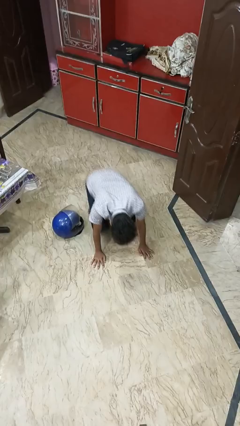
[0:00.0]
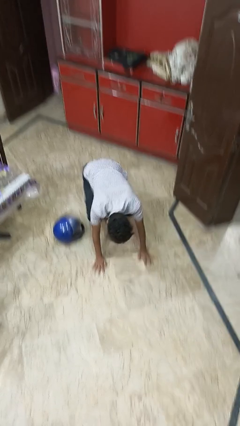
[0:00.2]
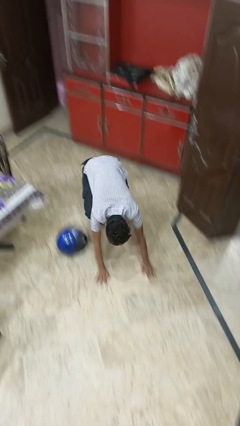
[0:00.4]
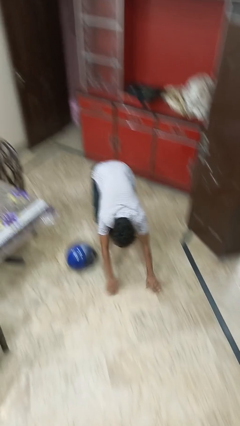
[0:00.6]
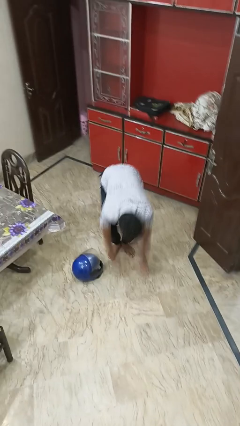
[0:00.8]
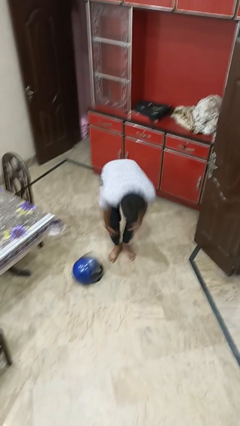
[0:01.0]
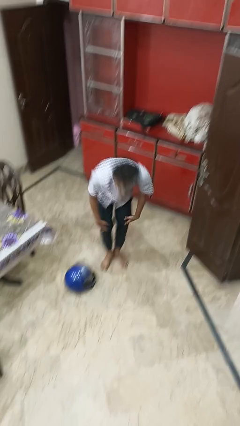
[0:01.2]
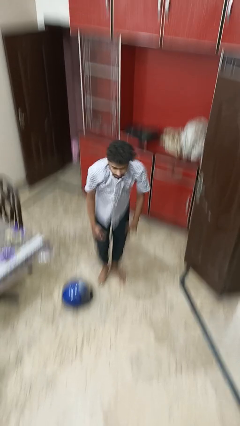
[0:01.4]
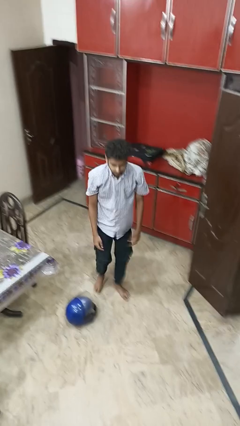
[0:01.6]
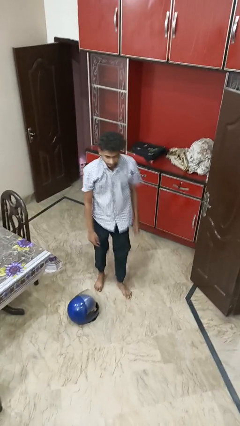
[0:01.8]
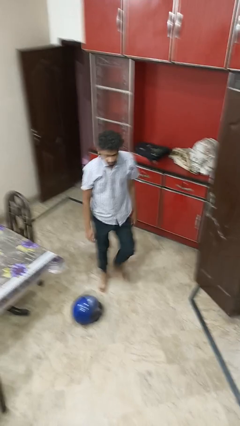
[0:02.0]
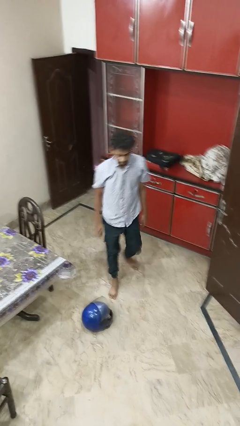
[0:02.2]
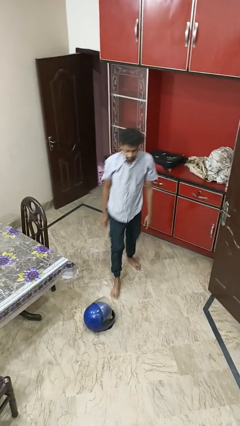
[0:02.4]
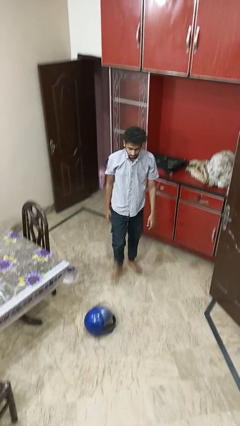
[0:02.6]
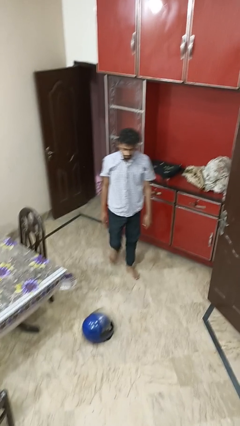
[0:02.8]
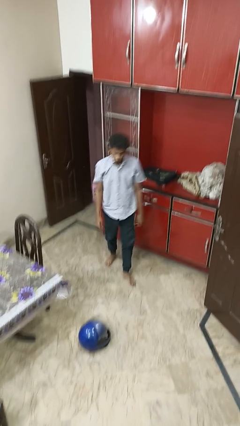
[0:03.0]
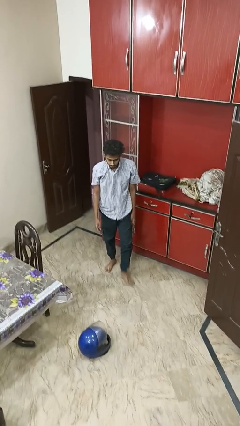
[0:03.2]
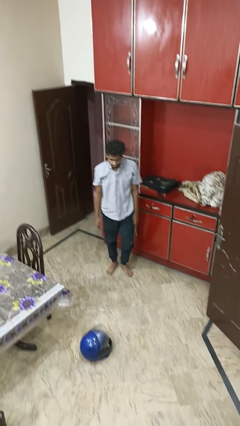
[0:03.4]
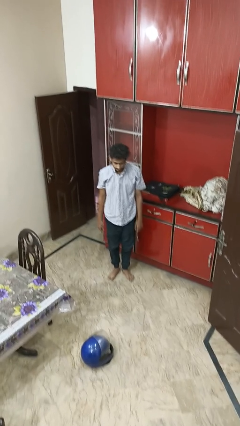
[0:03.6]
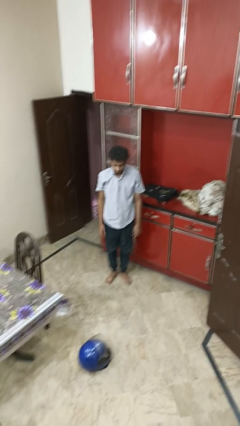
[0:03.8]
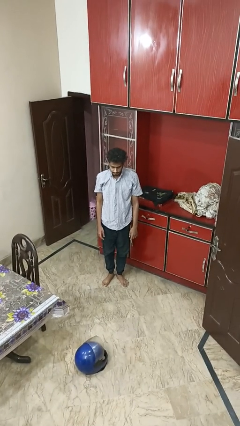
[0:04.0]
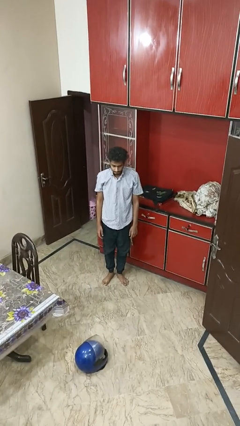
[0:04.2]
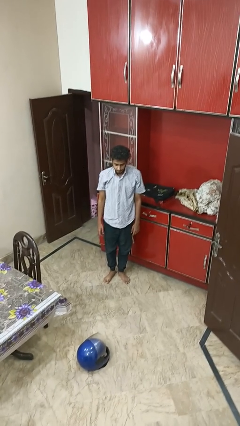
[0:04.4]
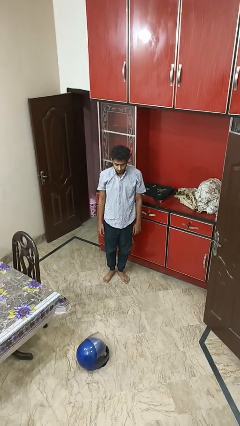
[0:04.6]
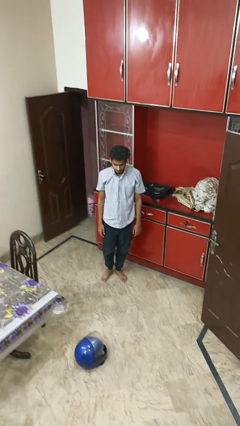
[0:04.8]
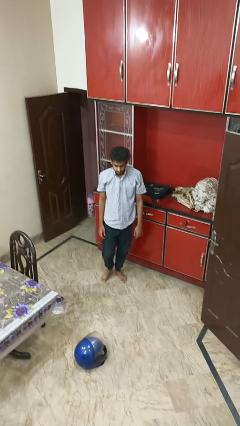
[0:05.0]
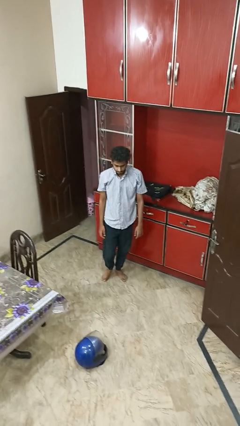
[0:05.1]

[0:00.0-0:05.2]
person stands up from floor

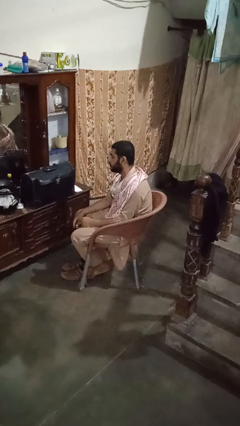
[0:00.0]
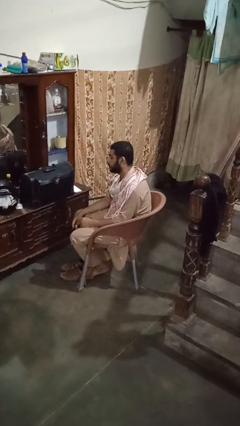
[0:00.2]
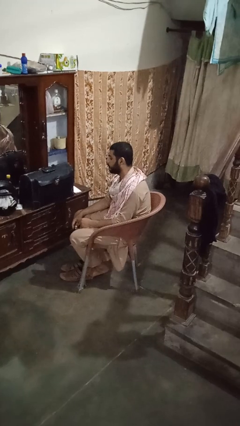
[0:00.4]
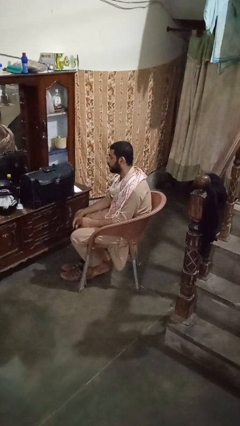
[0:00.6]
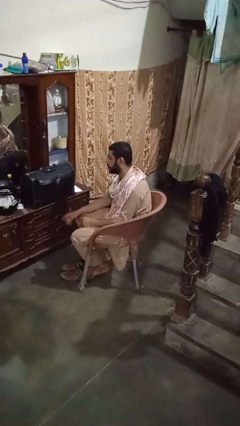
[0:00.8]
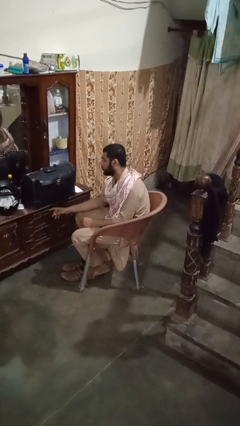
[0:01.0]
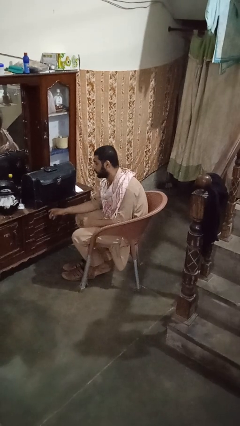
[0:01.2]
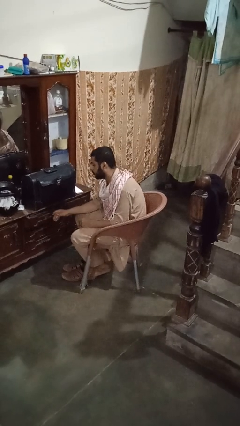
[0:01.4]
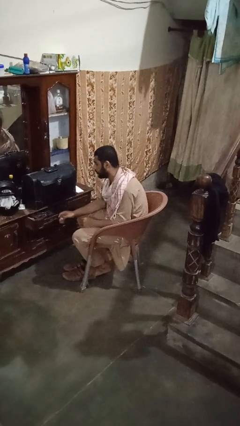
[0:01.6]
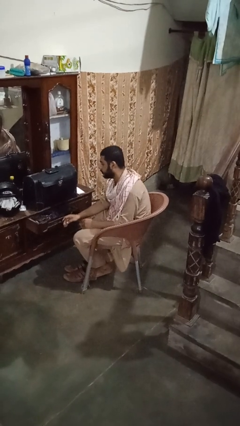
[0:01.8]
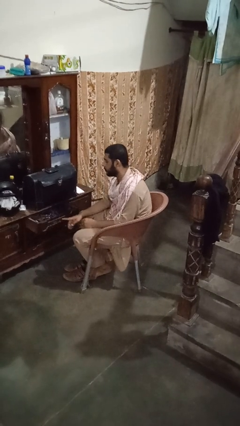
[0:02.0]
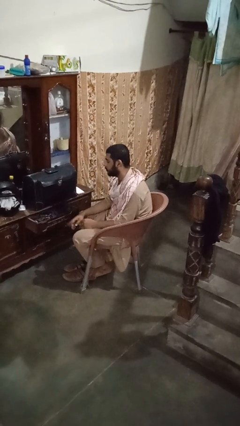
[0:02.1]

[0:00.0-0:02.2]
person opens dresser drawer

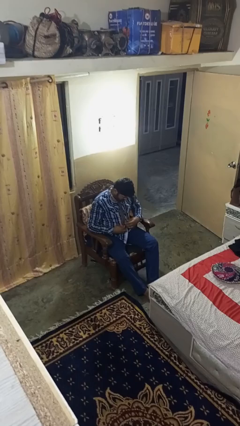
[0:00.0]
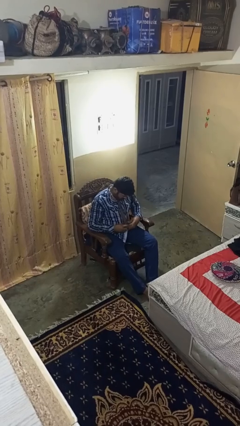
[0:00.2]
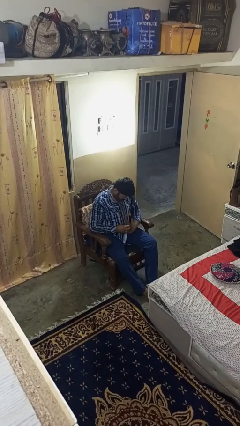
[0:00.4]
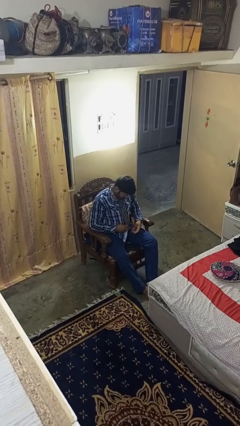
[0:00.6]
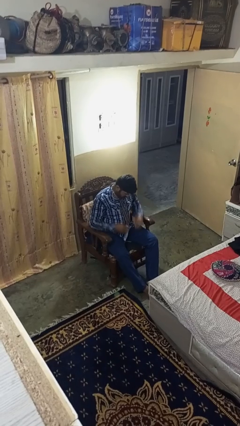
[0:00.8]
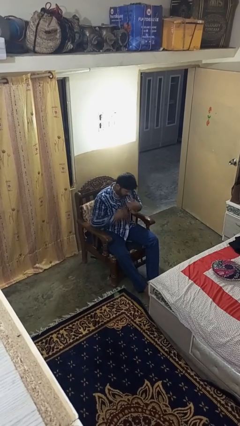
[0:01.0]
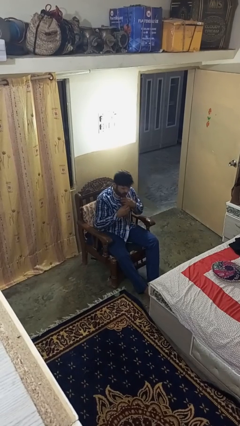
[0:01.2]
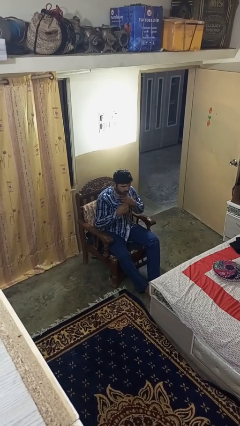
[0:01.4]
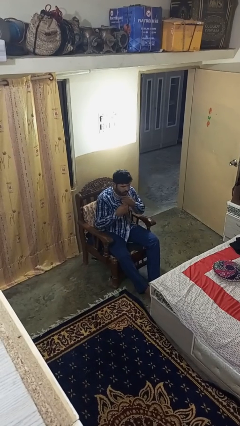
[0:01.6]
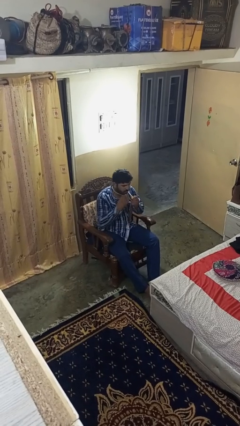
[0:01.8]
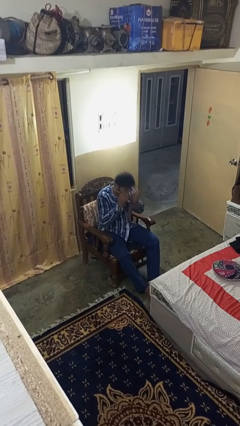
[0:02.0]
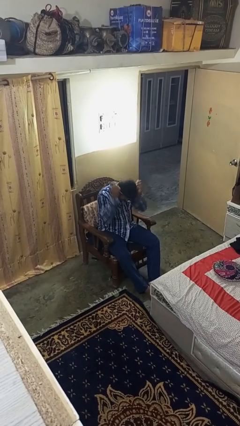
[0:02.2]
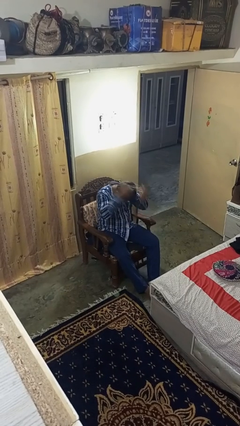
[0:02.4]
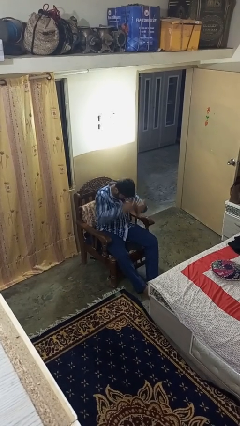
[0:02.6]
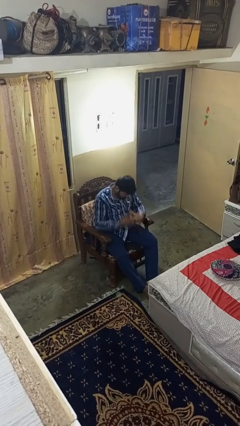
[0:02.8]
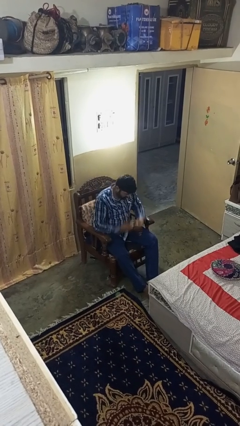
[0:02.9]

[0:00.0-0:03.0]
person takes off necktie

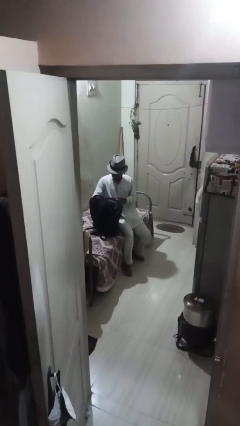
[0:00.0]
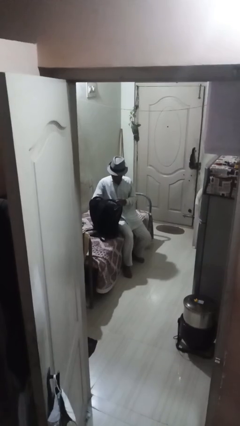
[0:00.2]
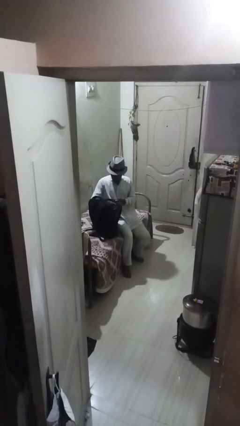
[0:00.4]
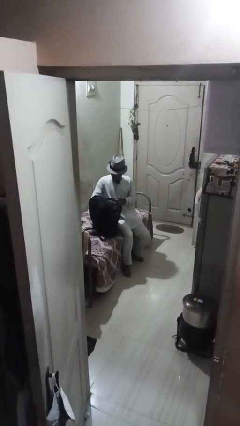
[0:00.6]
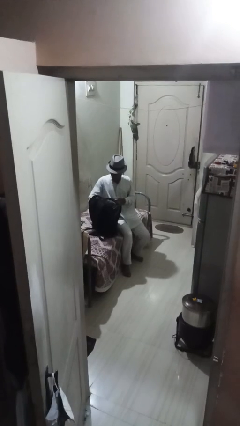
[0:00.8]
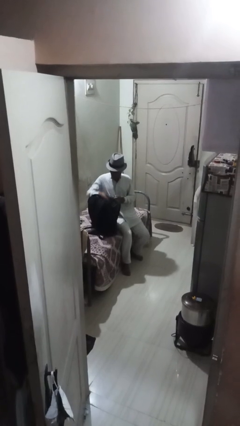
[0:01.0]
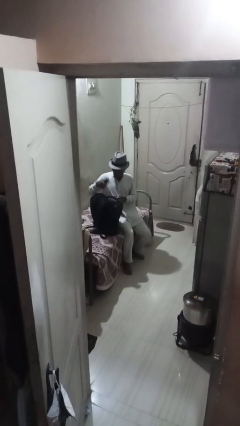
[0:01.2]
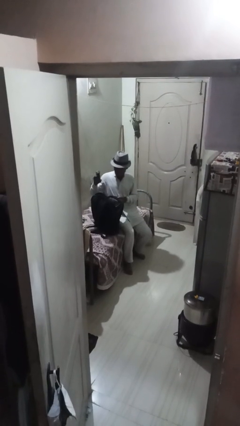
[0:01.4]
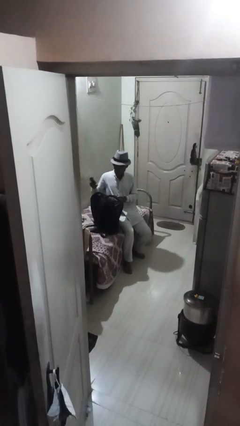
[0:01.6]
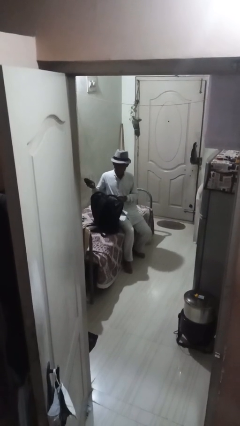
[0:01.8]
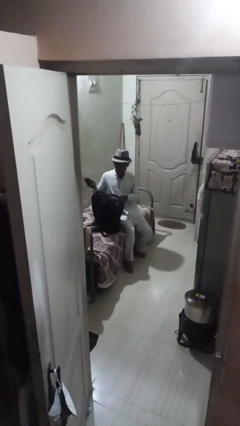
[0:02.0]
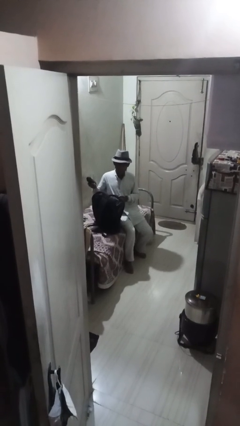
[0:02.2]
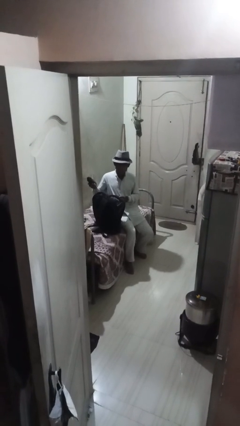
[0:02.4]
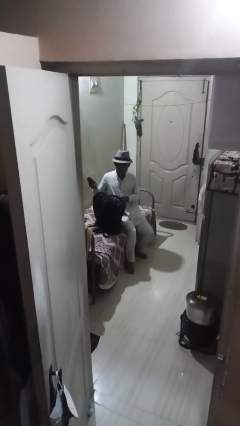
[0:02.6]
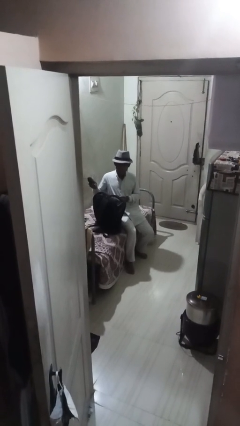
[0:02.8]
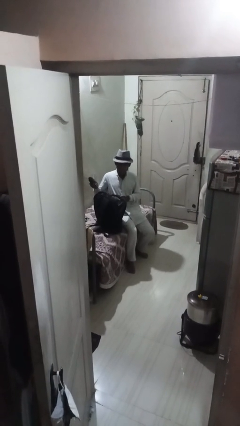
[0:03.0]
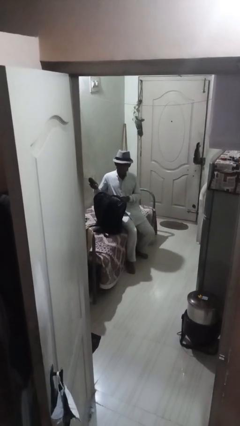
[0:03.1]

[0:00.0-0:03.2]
person takes object from backpack

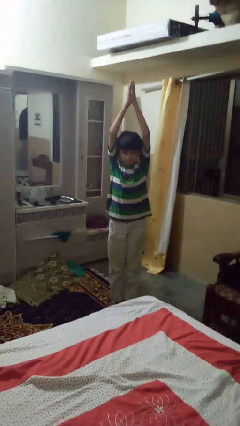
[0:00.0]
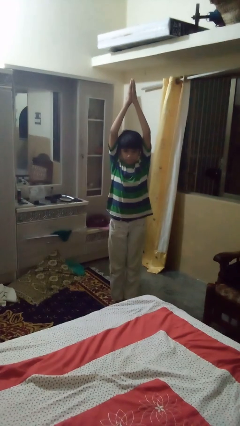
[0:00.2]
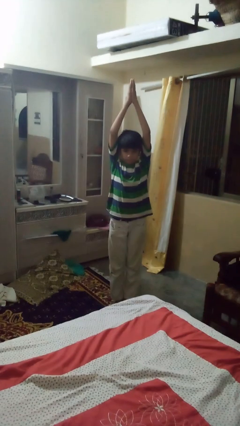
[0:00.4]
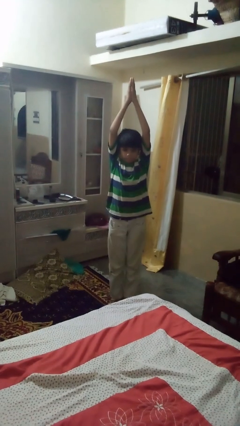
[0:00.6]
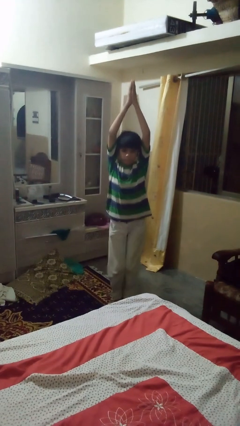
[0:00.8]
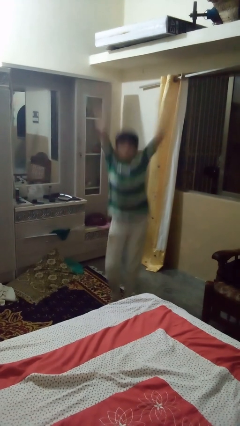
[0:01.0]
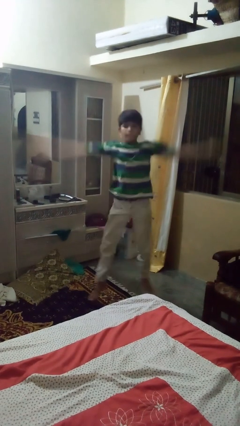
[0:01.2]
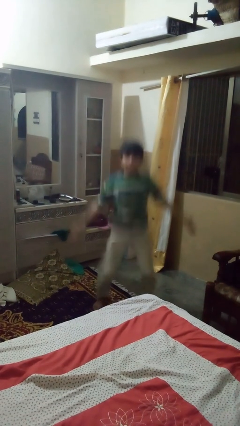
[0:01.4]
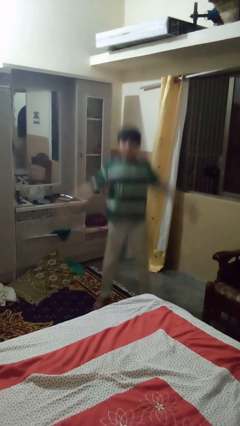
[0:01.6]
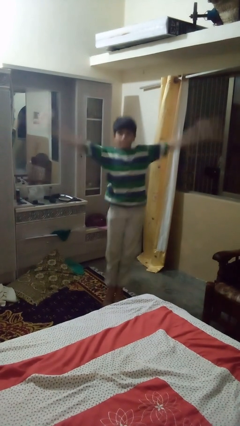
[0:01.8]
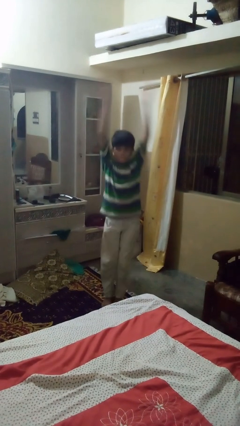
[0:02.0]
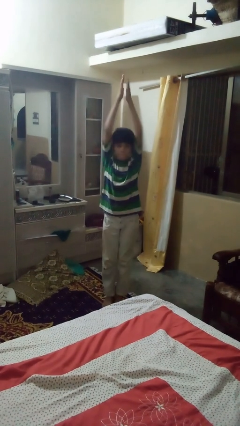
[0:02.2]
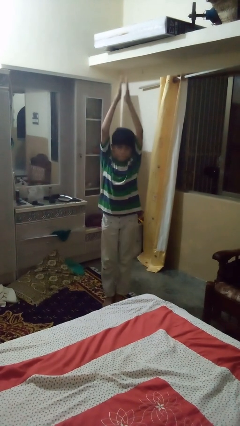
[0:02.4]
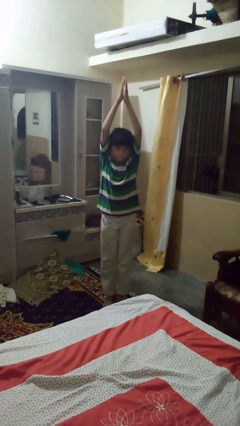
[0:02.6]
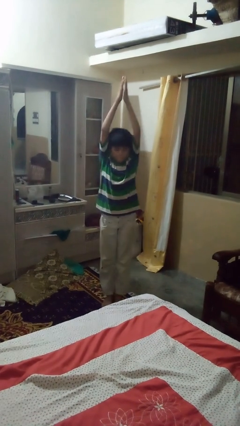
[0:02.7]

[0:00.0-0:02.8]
person exercises with jumping jacks

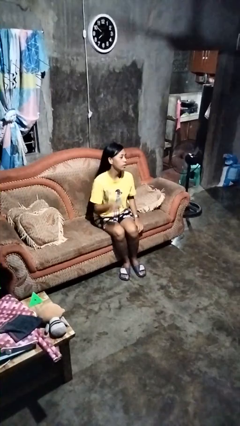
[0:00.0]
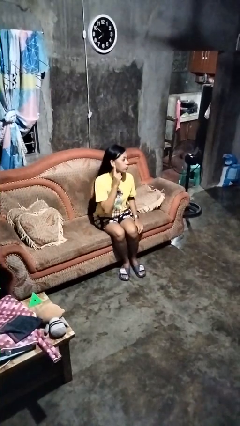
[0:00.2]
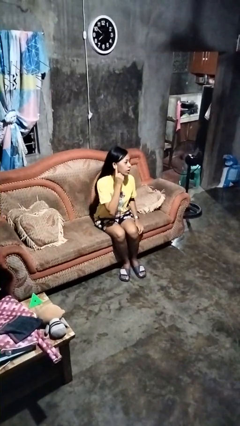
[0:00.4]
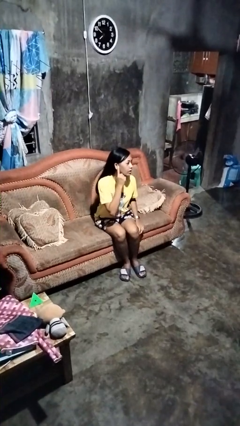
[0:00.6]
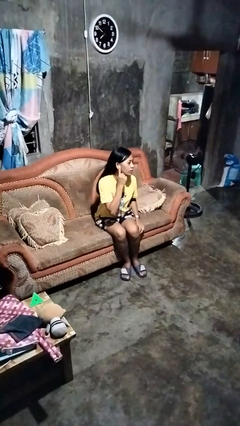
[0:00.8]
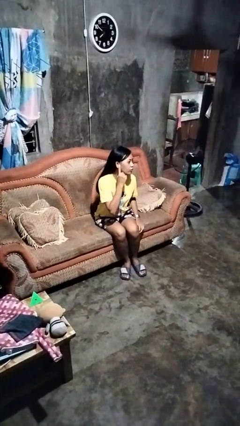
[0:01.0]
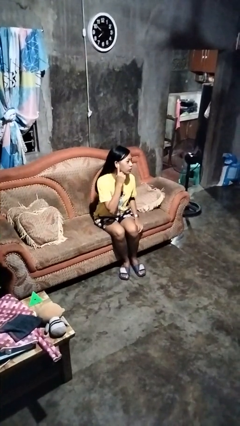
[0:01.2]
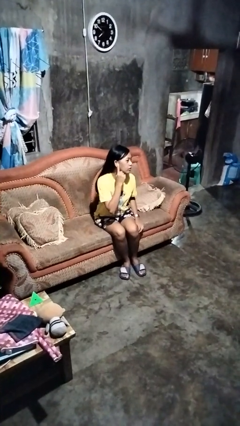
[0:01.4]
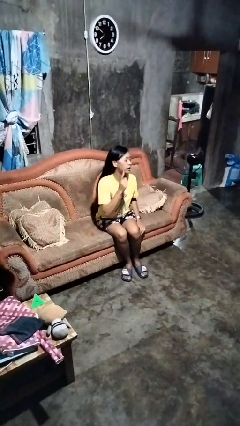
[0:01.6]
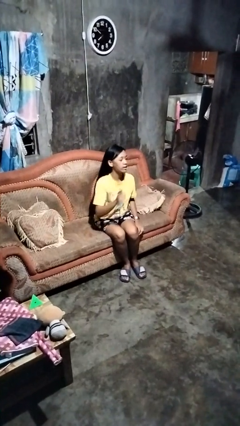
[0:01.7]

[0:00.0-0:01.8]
person gestures listen closely
